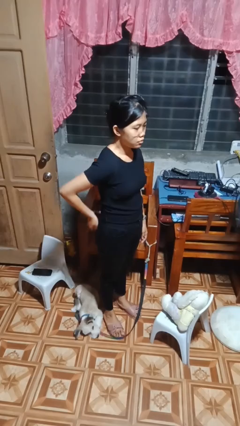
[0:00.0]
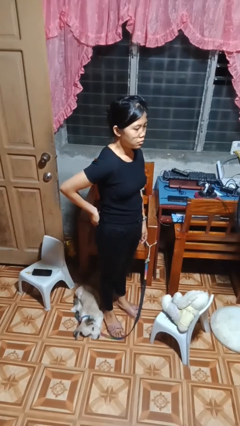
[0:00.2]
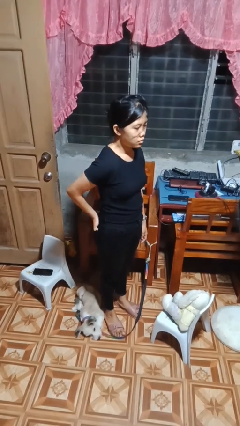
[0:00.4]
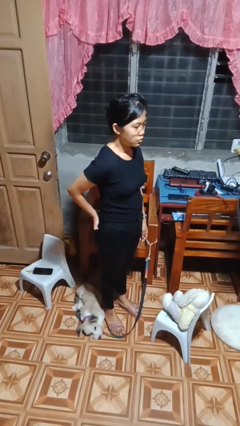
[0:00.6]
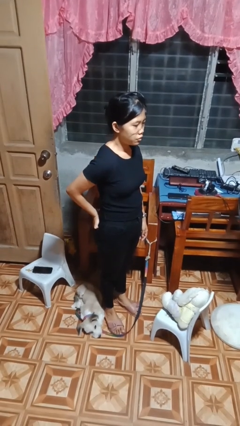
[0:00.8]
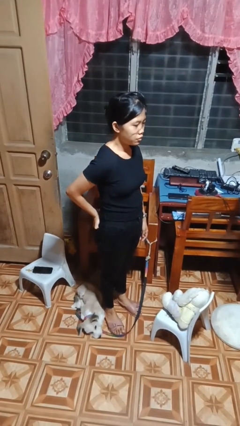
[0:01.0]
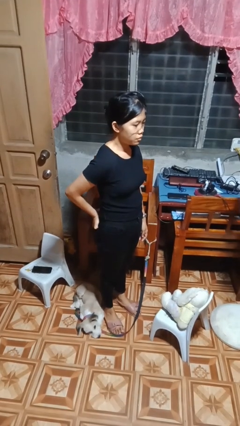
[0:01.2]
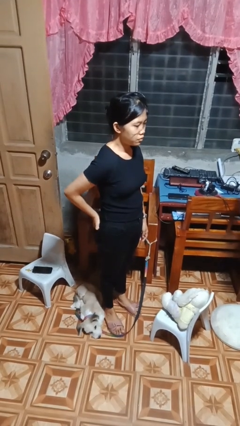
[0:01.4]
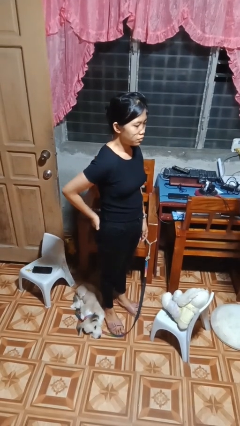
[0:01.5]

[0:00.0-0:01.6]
person puts hands in back pockets

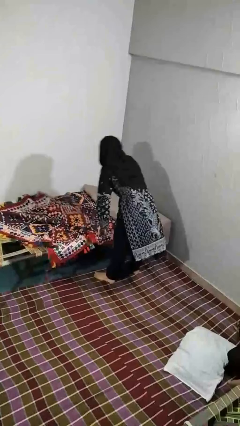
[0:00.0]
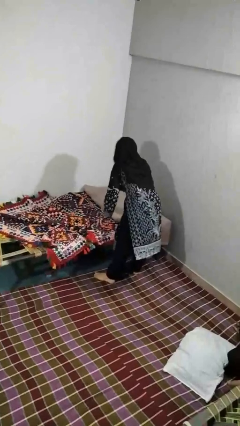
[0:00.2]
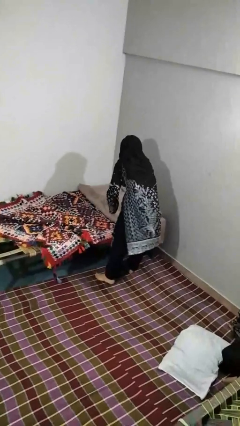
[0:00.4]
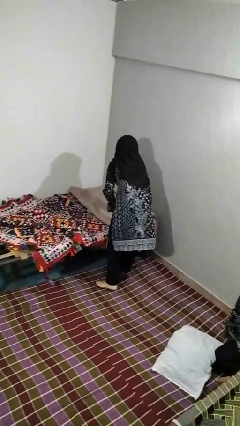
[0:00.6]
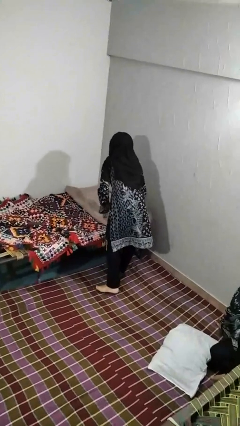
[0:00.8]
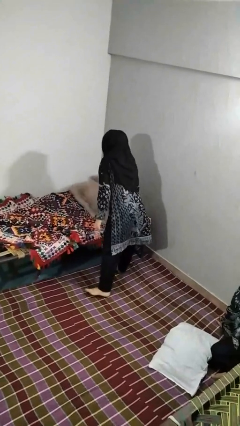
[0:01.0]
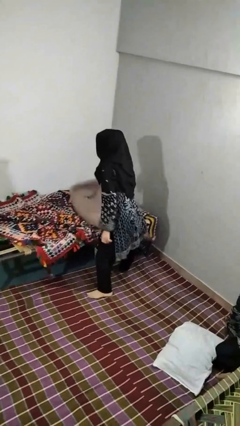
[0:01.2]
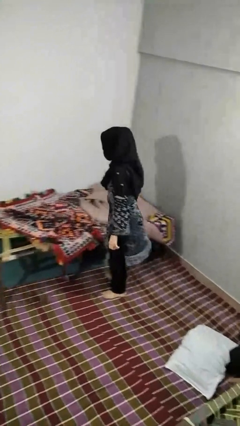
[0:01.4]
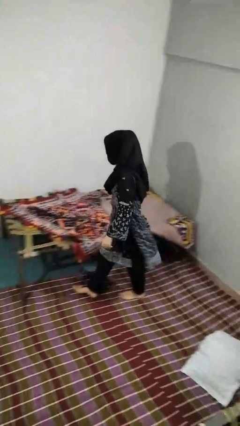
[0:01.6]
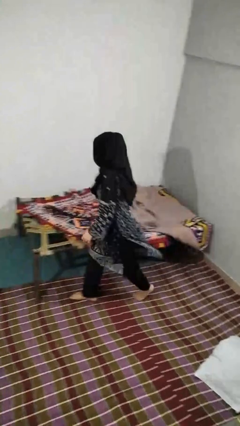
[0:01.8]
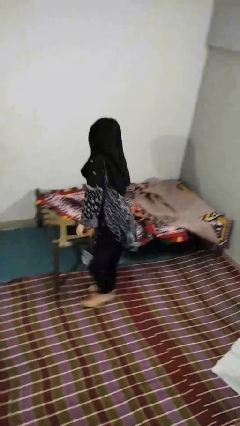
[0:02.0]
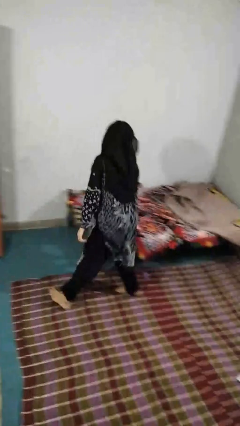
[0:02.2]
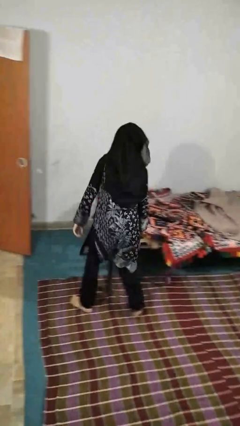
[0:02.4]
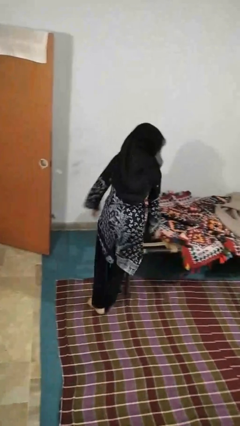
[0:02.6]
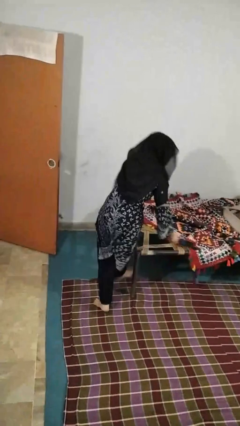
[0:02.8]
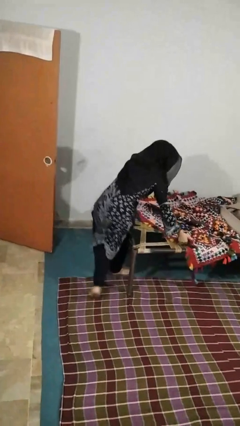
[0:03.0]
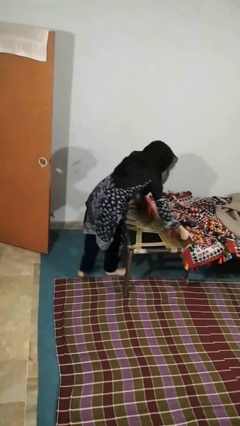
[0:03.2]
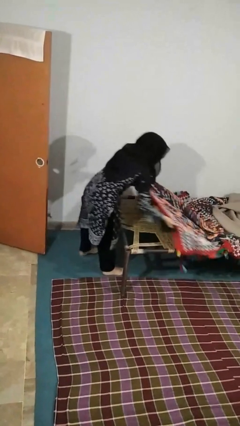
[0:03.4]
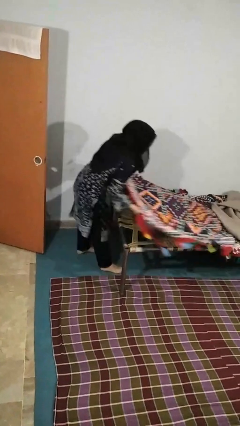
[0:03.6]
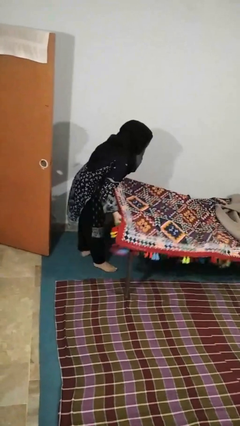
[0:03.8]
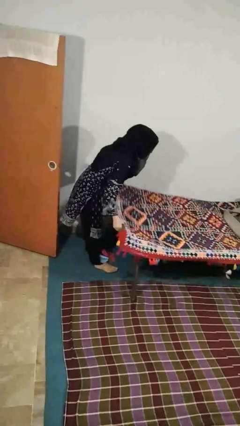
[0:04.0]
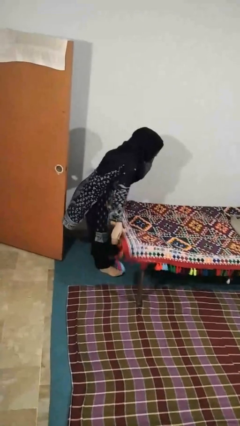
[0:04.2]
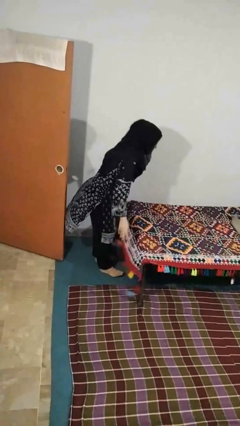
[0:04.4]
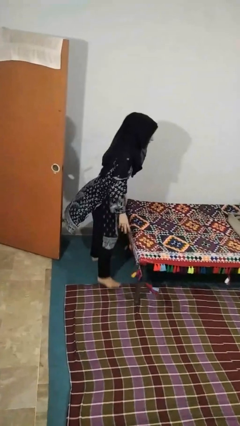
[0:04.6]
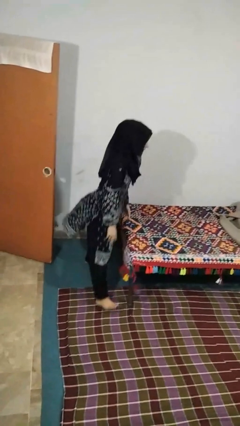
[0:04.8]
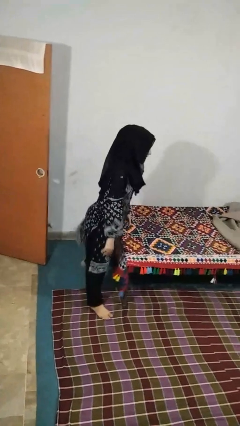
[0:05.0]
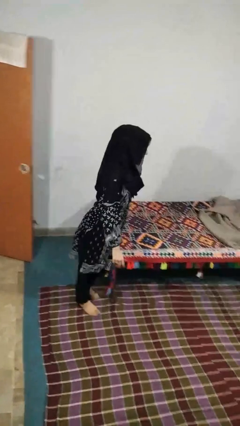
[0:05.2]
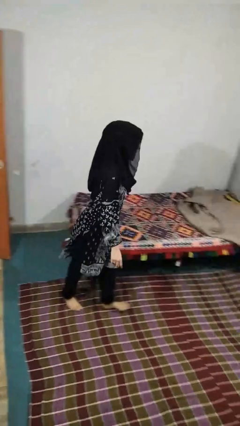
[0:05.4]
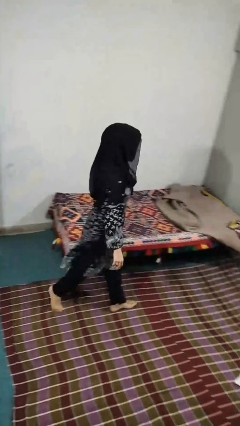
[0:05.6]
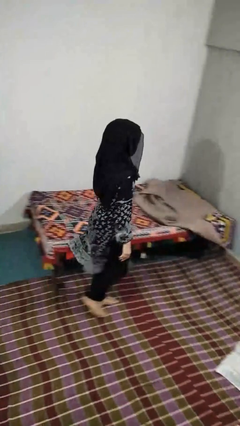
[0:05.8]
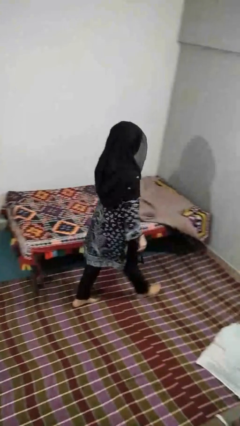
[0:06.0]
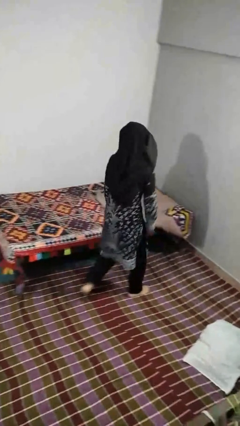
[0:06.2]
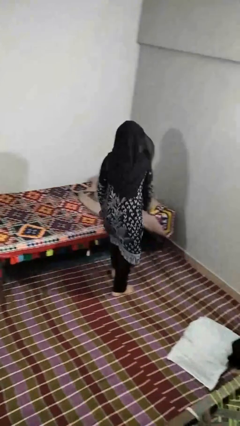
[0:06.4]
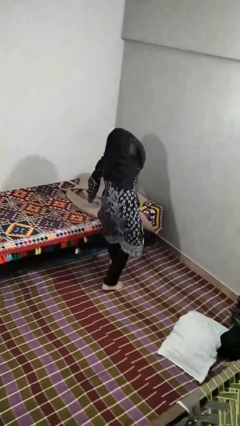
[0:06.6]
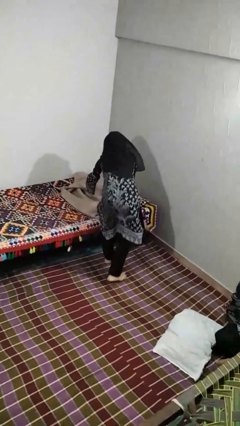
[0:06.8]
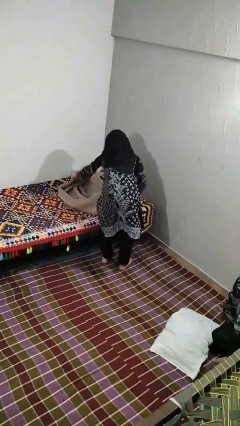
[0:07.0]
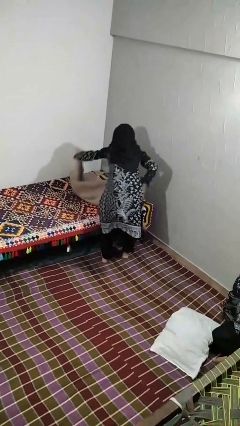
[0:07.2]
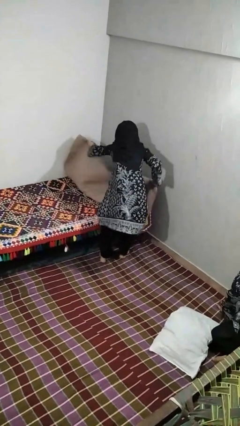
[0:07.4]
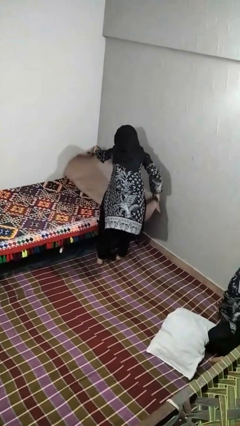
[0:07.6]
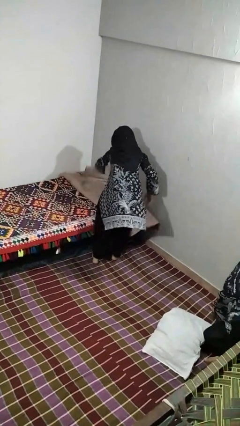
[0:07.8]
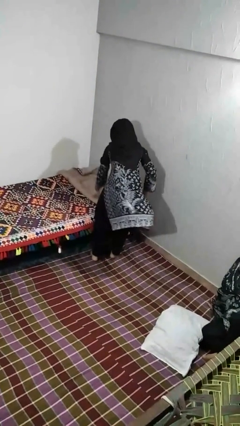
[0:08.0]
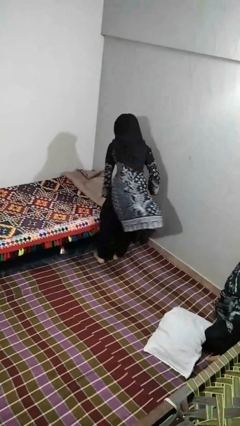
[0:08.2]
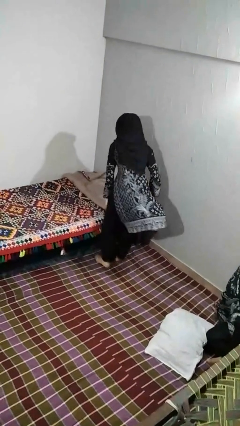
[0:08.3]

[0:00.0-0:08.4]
person makes bed

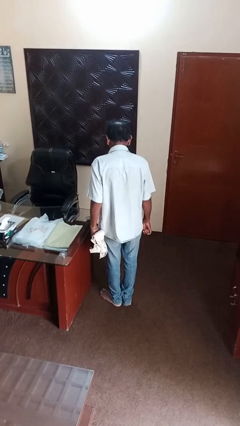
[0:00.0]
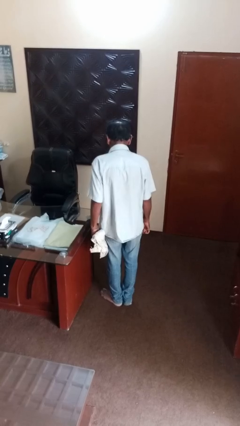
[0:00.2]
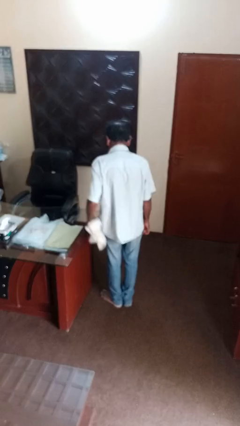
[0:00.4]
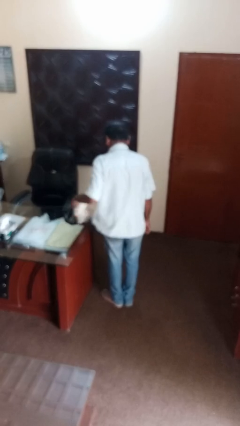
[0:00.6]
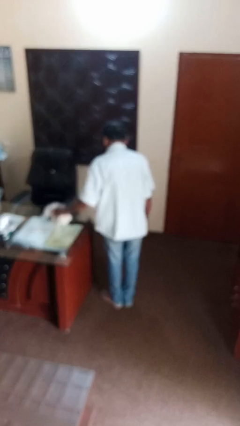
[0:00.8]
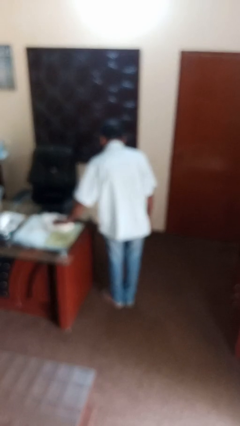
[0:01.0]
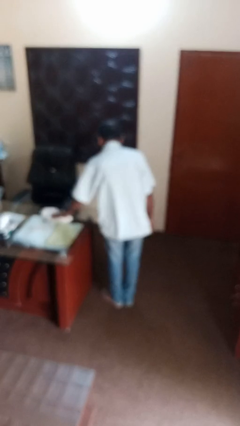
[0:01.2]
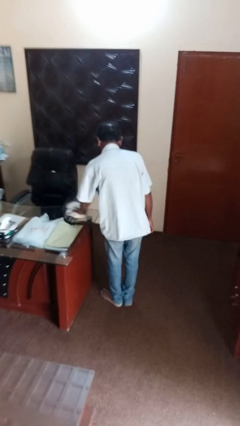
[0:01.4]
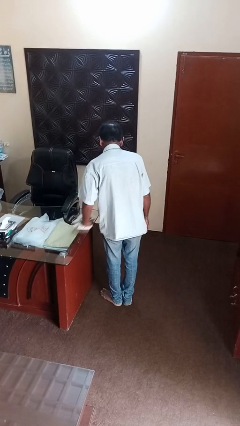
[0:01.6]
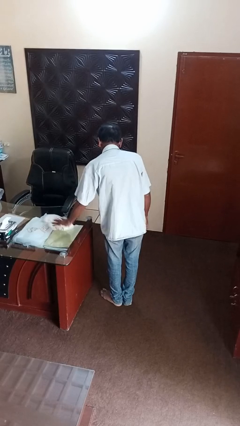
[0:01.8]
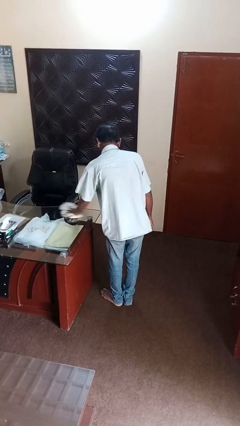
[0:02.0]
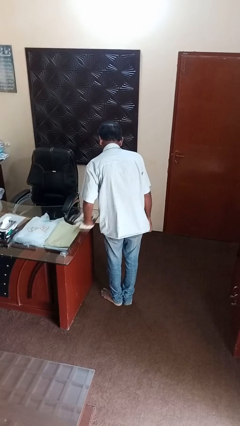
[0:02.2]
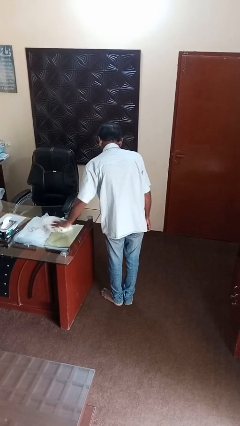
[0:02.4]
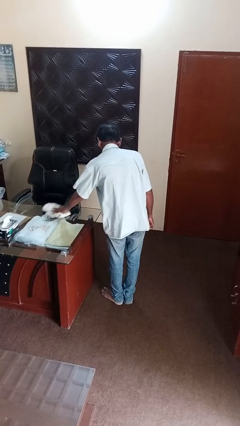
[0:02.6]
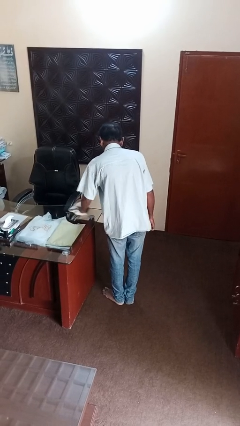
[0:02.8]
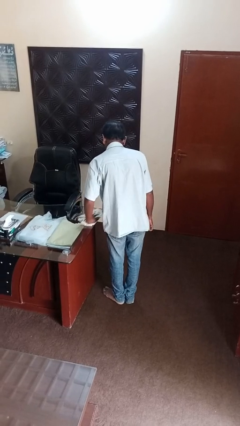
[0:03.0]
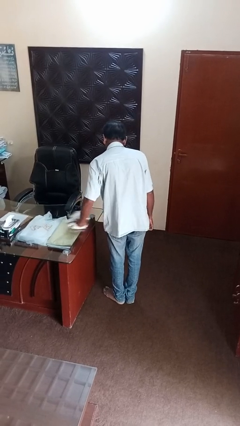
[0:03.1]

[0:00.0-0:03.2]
person cleans table with rag

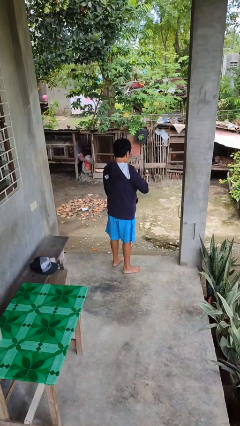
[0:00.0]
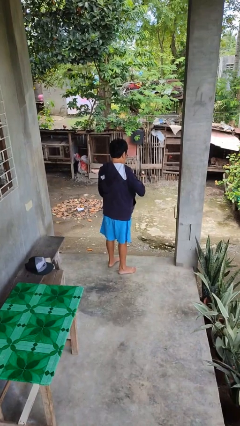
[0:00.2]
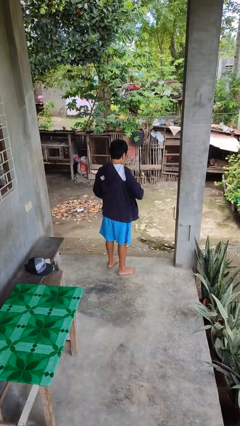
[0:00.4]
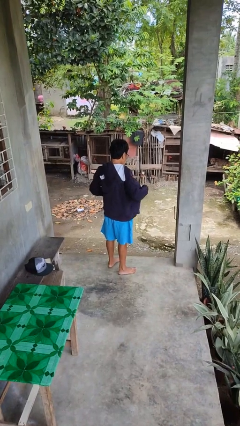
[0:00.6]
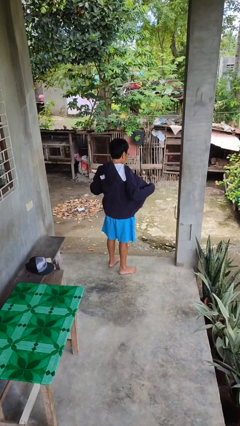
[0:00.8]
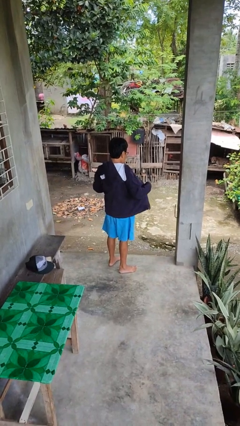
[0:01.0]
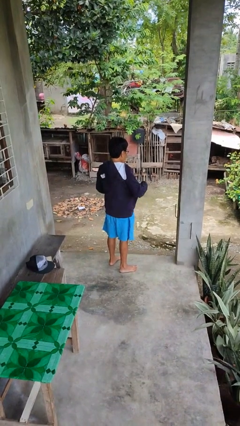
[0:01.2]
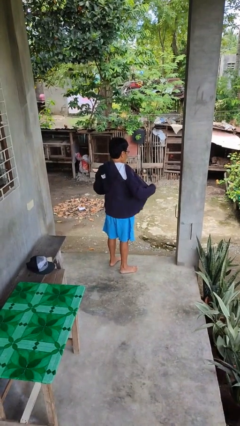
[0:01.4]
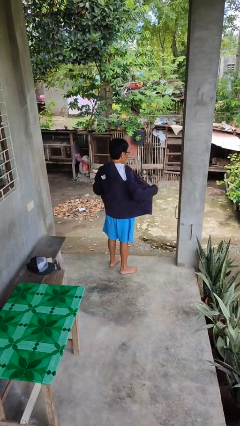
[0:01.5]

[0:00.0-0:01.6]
person unzips jacket

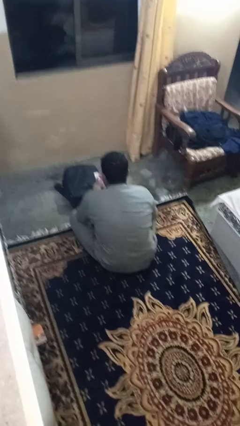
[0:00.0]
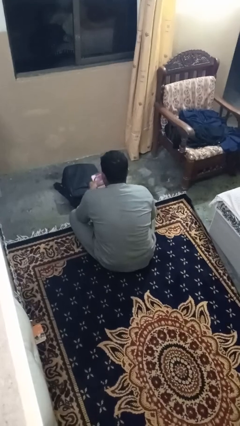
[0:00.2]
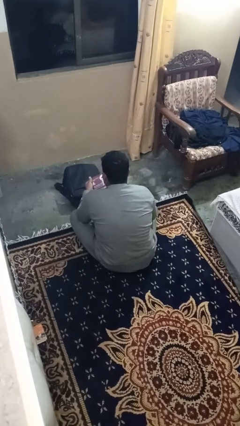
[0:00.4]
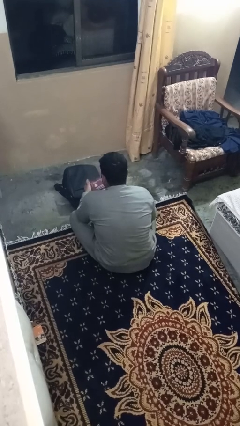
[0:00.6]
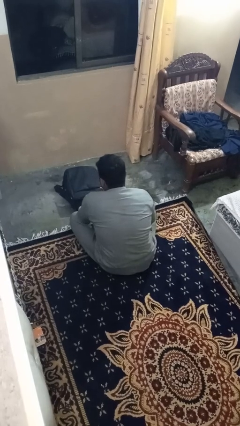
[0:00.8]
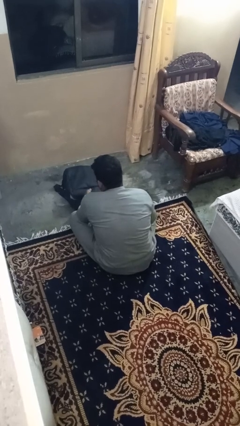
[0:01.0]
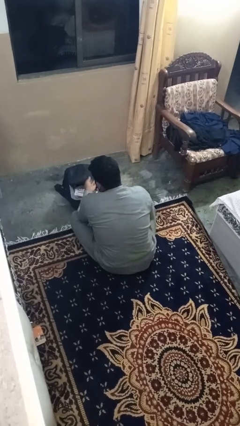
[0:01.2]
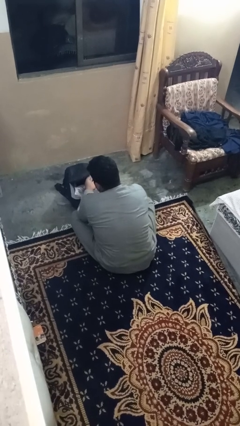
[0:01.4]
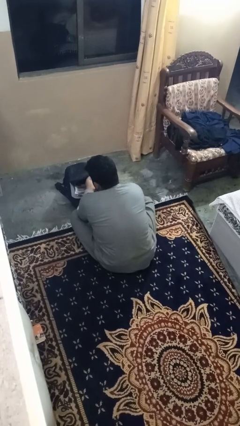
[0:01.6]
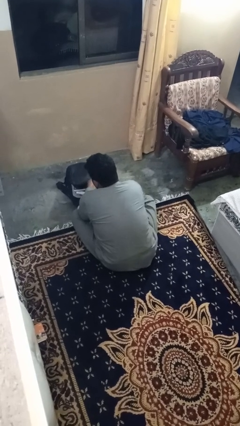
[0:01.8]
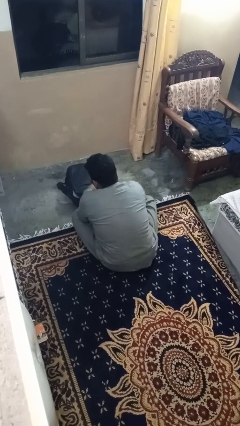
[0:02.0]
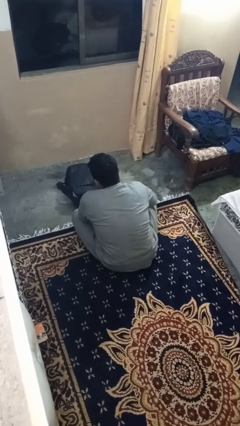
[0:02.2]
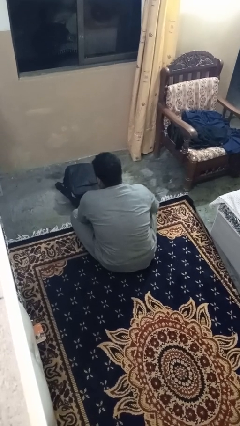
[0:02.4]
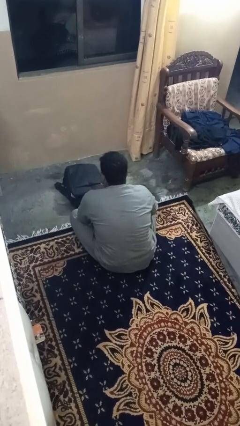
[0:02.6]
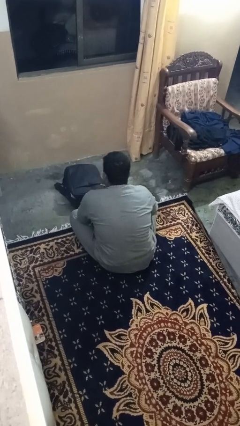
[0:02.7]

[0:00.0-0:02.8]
person puts object into bag
